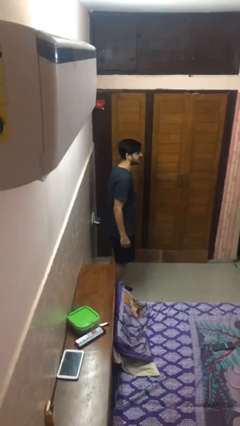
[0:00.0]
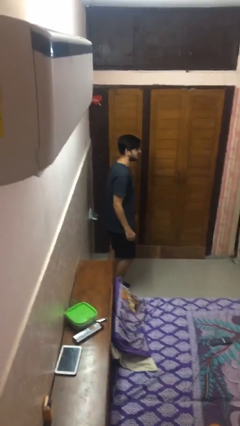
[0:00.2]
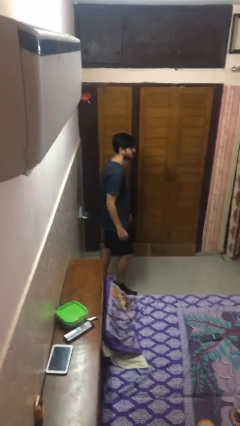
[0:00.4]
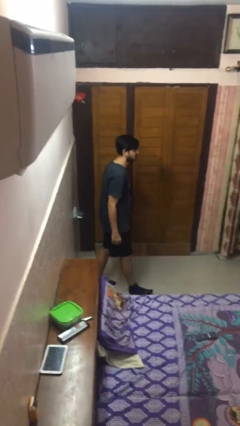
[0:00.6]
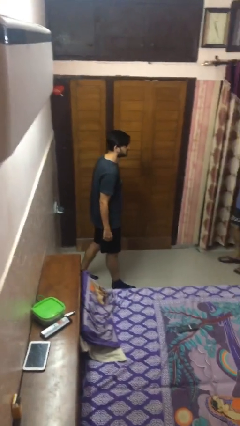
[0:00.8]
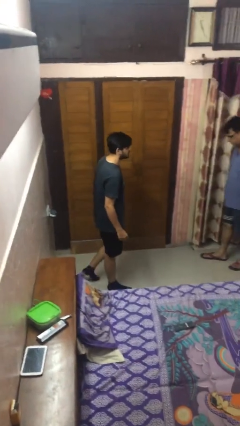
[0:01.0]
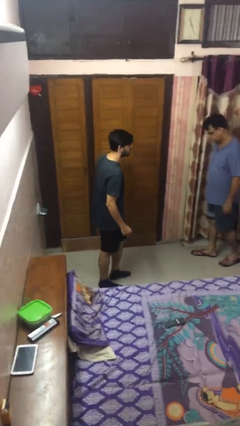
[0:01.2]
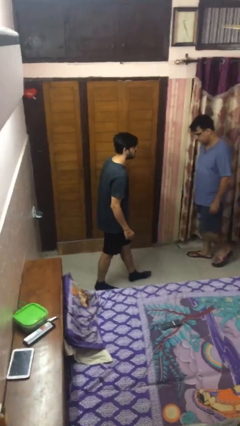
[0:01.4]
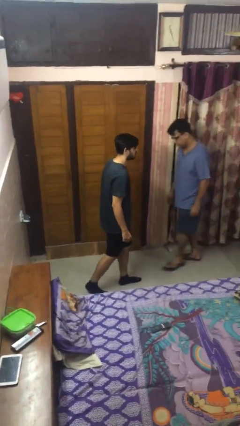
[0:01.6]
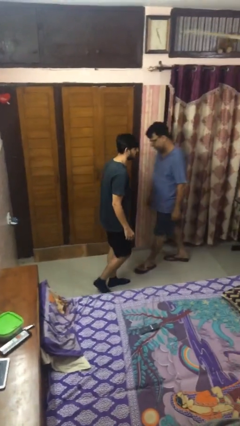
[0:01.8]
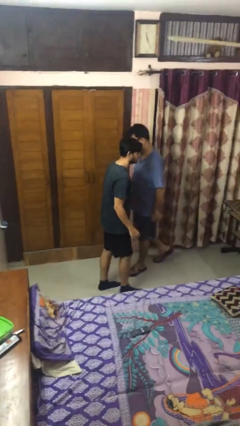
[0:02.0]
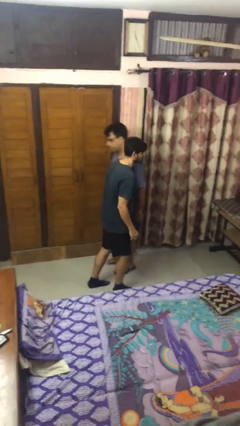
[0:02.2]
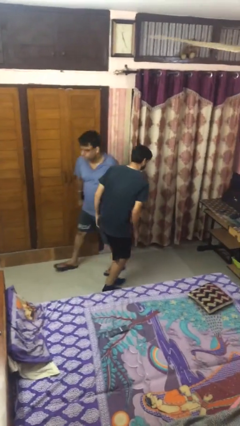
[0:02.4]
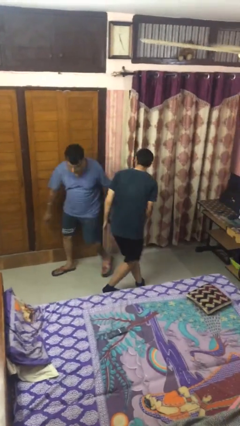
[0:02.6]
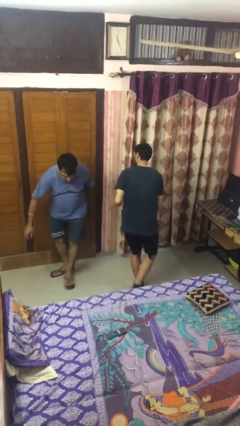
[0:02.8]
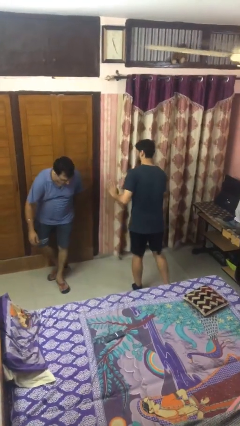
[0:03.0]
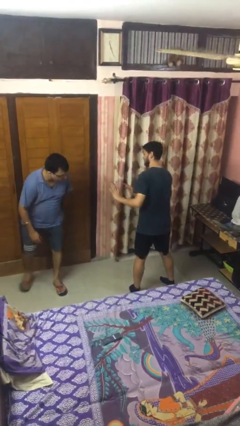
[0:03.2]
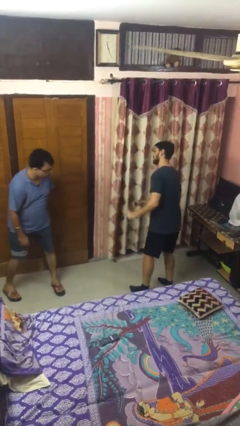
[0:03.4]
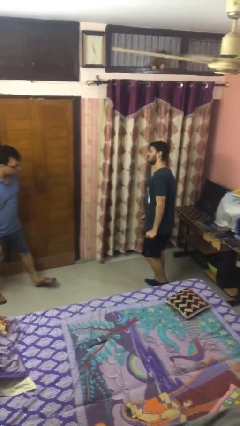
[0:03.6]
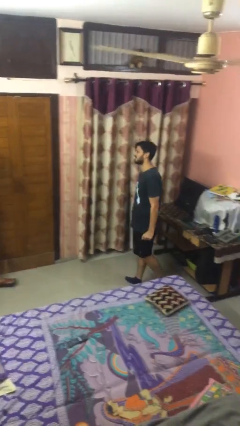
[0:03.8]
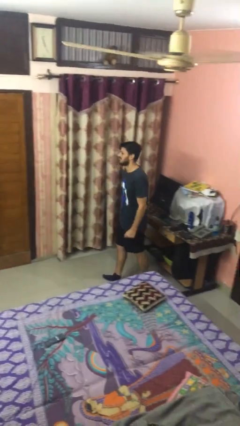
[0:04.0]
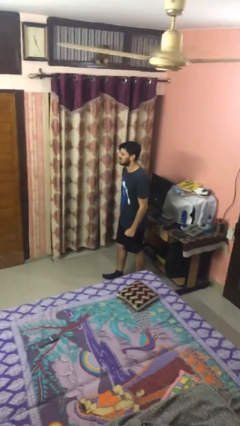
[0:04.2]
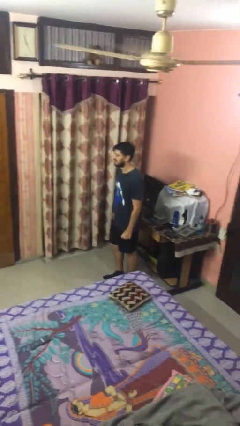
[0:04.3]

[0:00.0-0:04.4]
person bumps into person

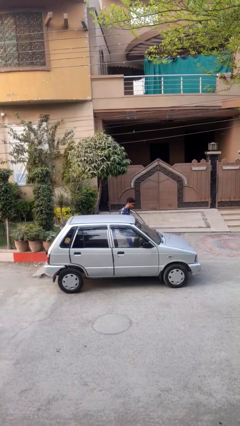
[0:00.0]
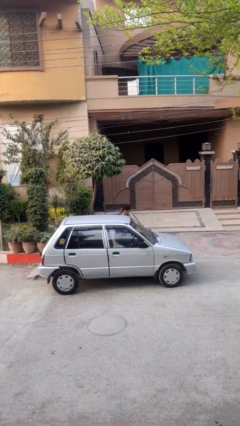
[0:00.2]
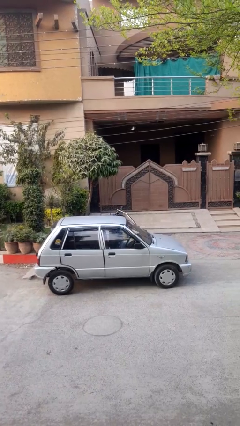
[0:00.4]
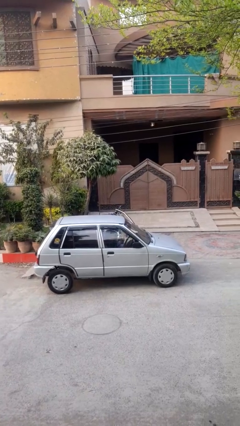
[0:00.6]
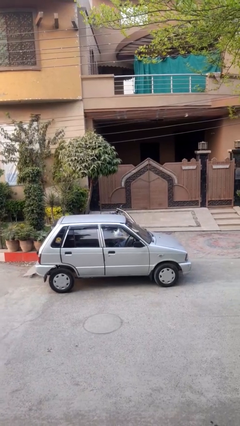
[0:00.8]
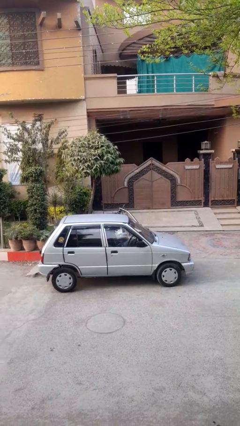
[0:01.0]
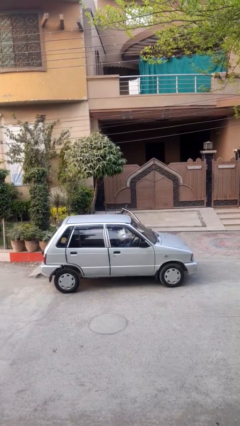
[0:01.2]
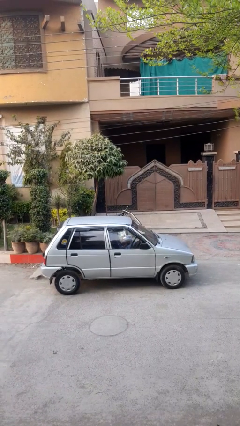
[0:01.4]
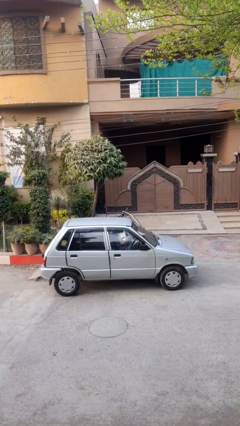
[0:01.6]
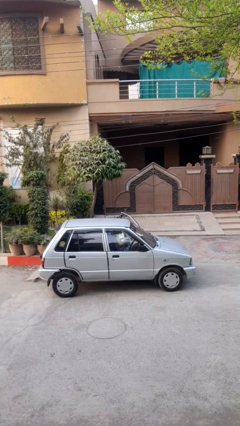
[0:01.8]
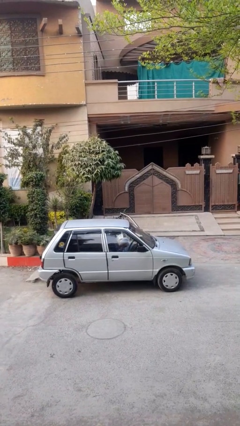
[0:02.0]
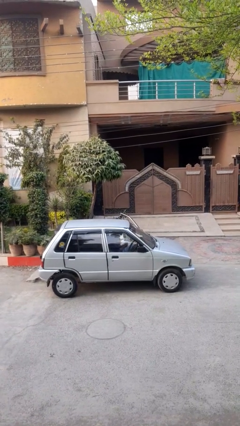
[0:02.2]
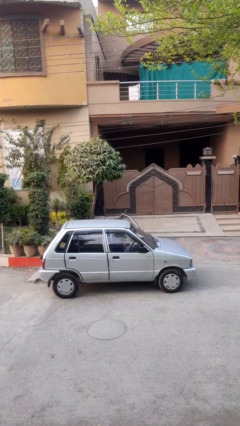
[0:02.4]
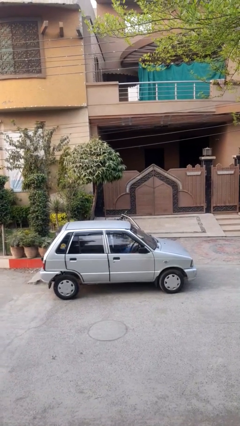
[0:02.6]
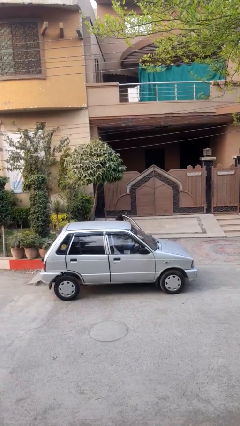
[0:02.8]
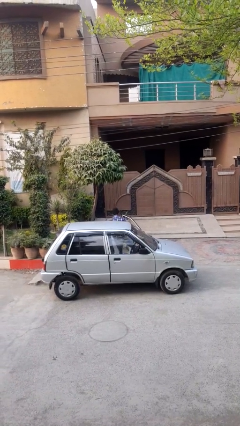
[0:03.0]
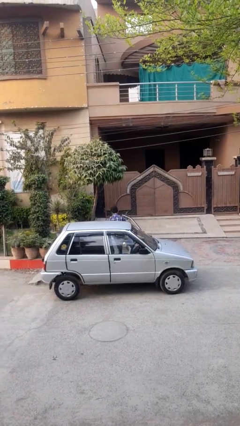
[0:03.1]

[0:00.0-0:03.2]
person enters car

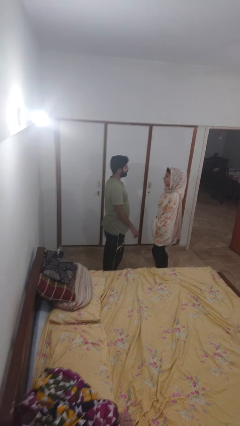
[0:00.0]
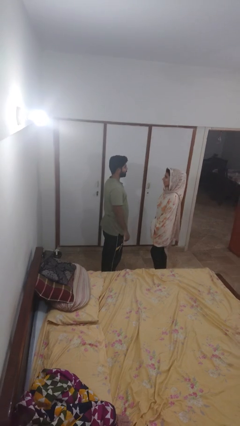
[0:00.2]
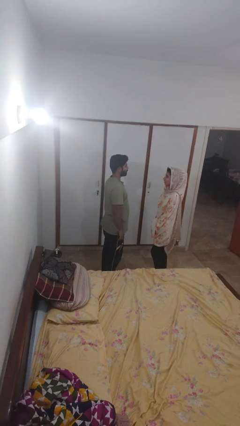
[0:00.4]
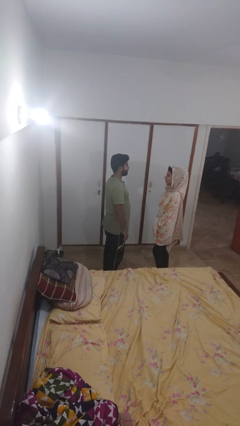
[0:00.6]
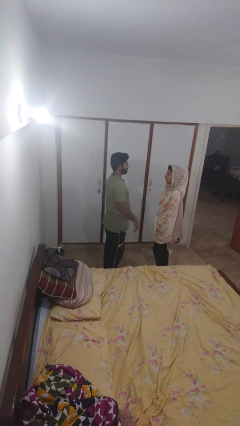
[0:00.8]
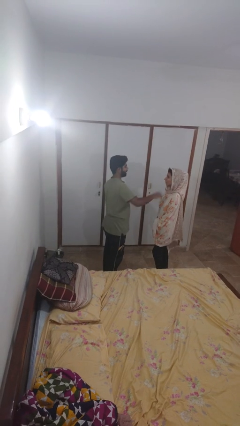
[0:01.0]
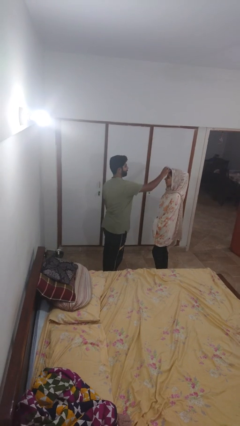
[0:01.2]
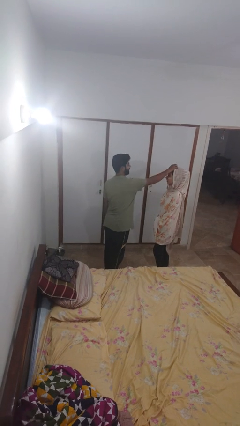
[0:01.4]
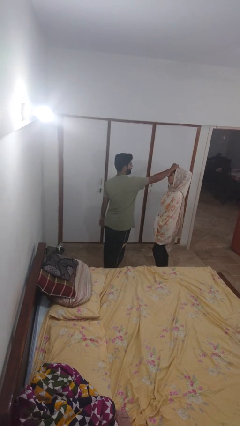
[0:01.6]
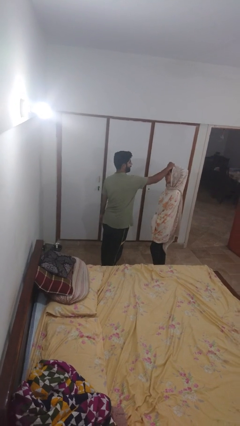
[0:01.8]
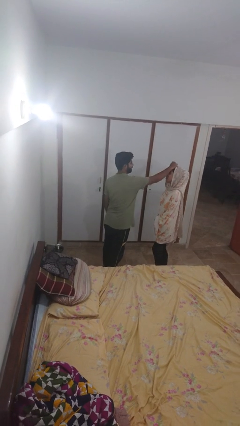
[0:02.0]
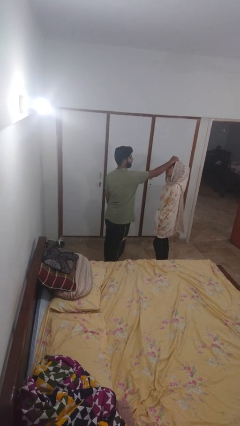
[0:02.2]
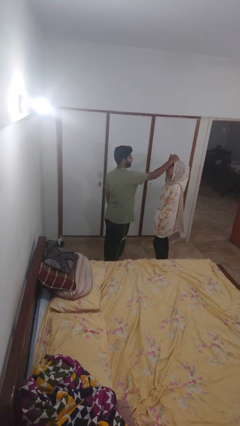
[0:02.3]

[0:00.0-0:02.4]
person grabs person by hair

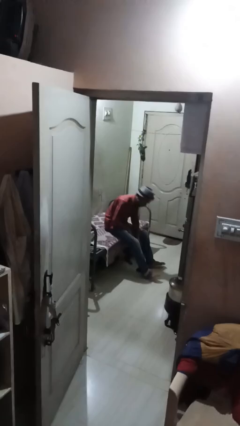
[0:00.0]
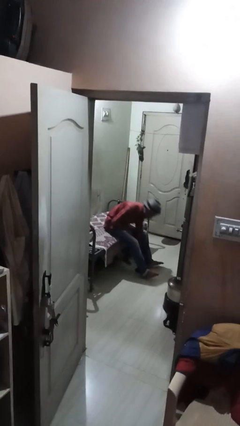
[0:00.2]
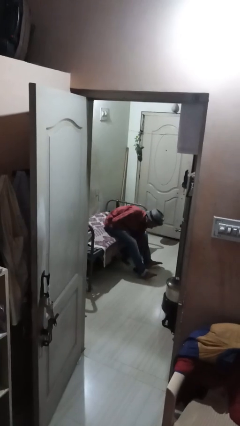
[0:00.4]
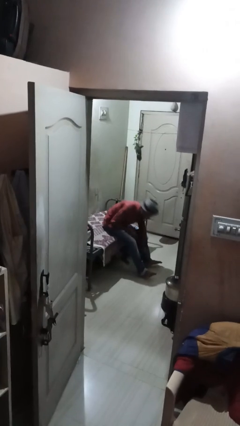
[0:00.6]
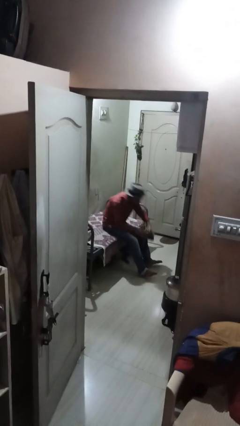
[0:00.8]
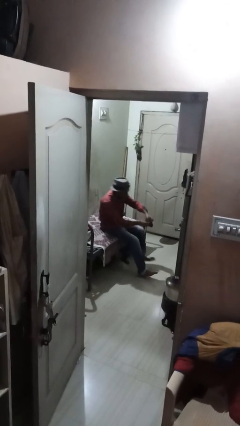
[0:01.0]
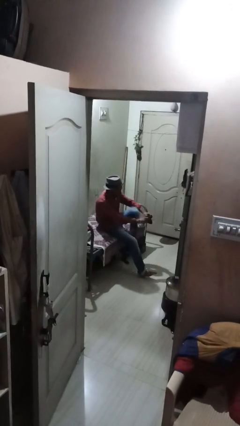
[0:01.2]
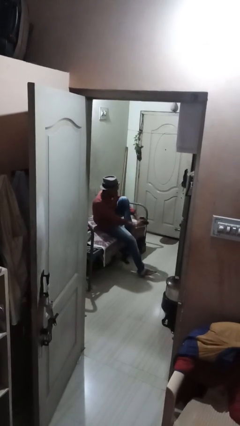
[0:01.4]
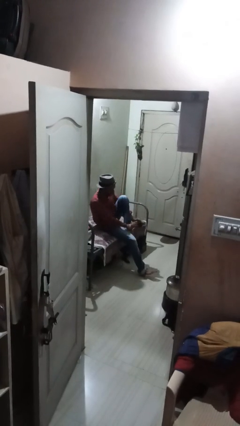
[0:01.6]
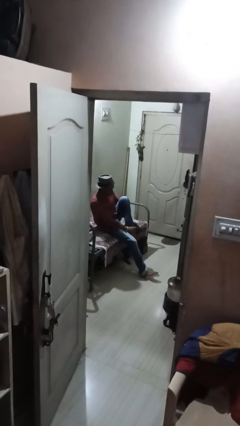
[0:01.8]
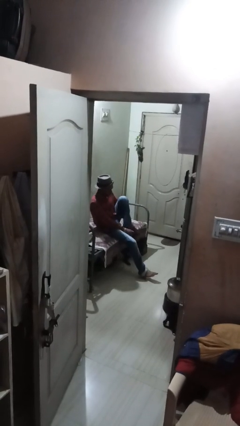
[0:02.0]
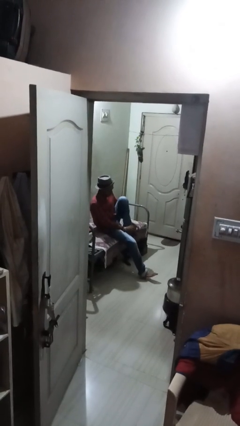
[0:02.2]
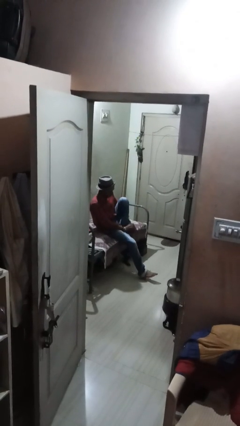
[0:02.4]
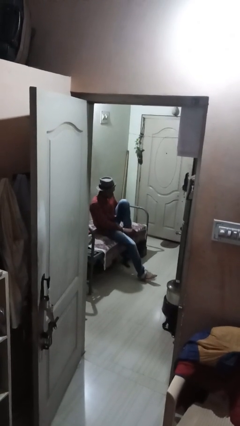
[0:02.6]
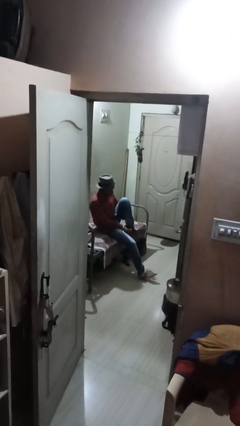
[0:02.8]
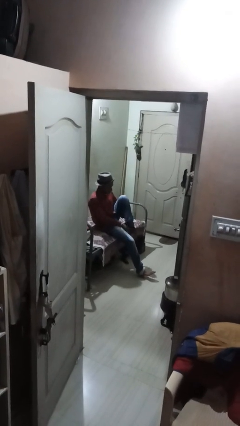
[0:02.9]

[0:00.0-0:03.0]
person puts on socks

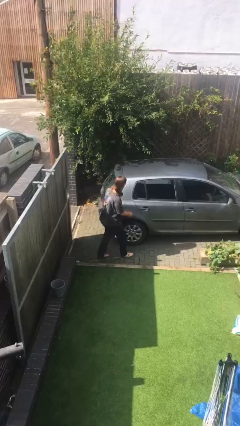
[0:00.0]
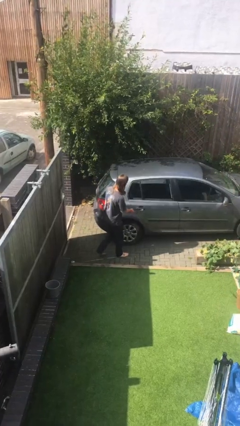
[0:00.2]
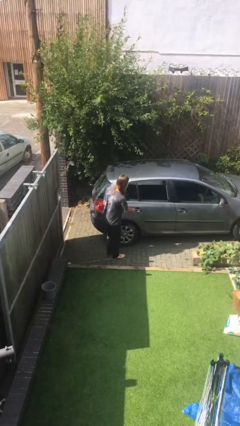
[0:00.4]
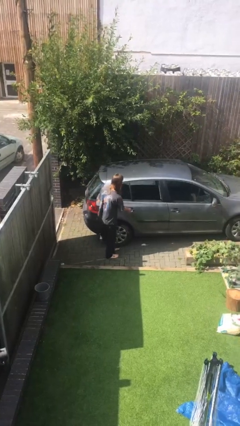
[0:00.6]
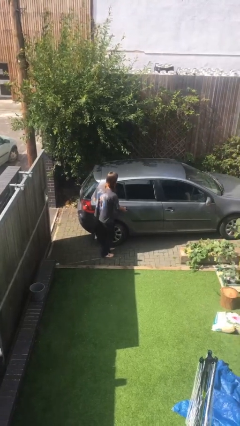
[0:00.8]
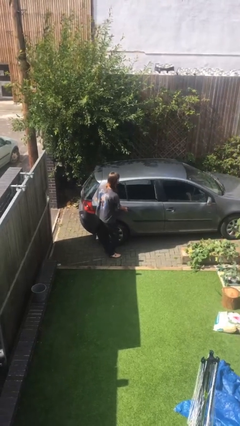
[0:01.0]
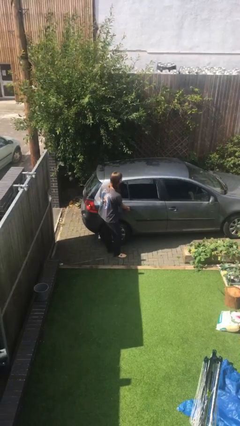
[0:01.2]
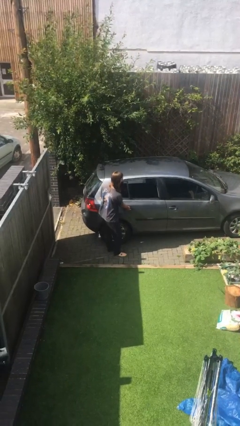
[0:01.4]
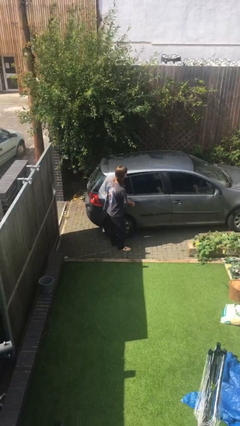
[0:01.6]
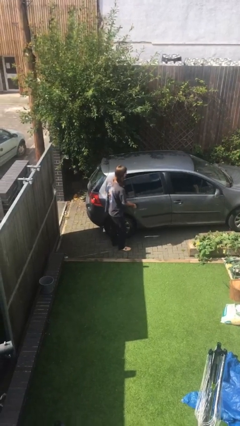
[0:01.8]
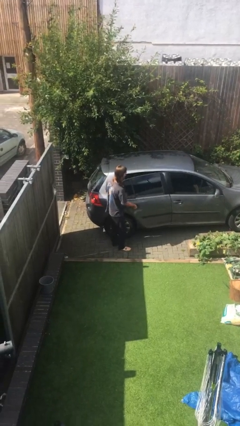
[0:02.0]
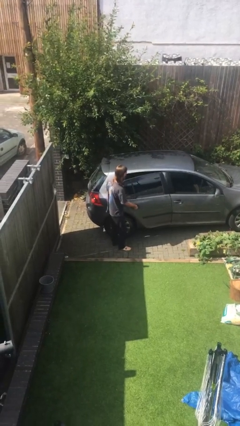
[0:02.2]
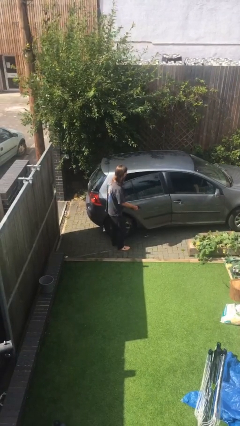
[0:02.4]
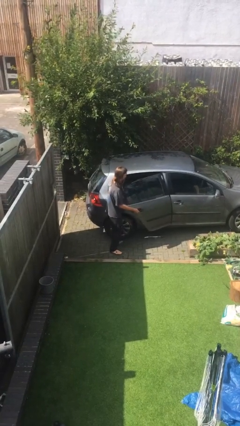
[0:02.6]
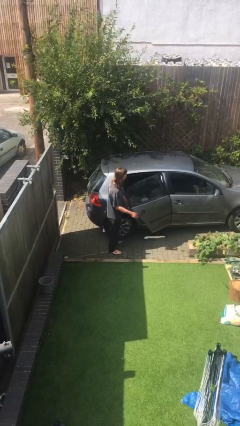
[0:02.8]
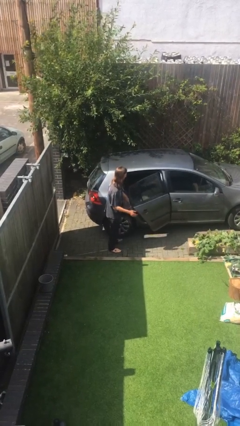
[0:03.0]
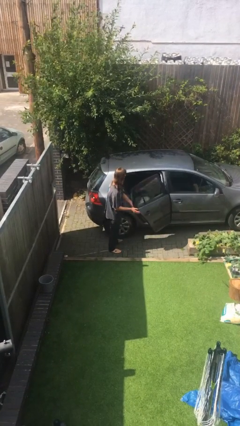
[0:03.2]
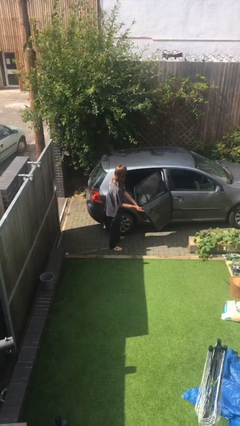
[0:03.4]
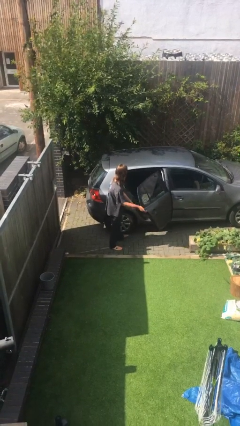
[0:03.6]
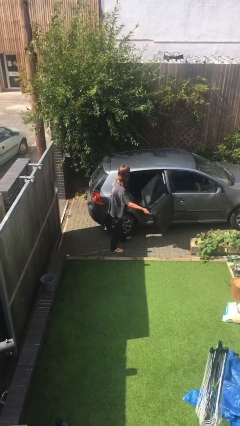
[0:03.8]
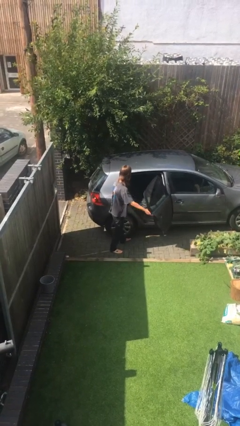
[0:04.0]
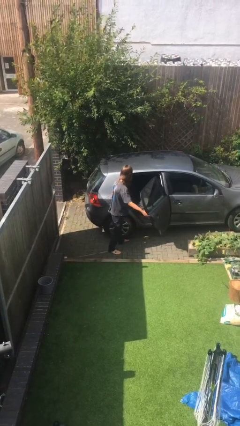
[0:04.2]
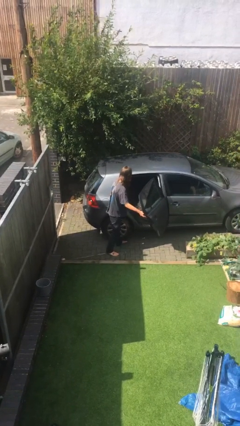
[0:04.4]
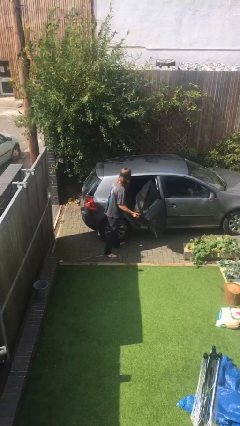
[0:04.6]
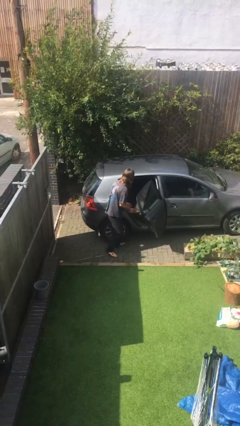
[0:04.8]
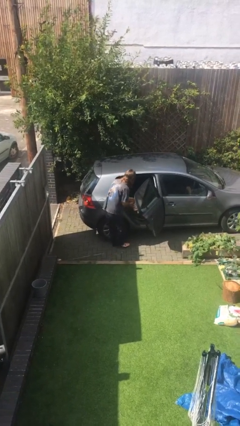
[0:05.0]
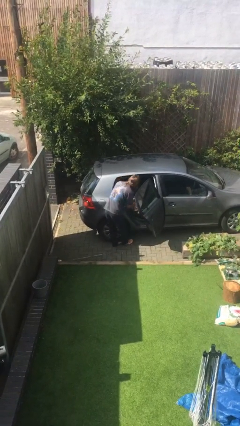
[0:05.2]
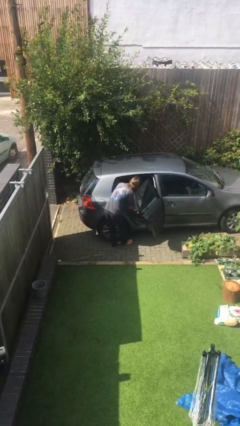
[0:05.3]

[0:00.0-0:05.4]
person opens car door
